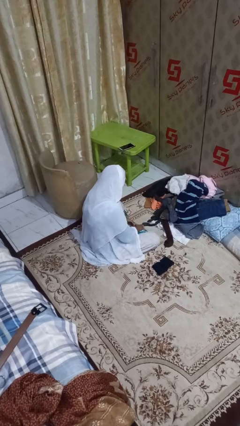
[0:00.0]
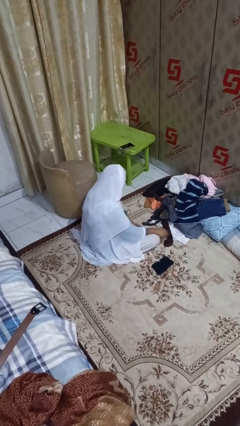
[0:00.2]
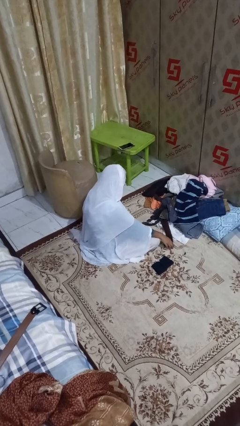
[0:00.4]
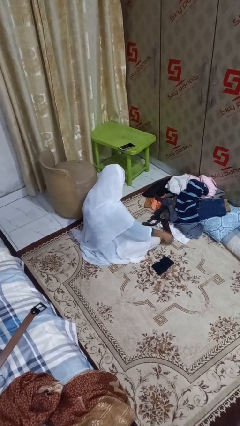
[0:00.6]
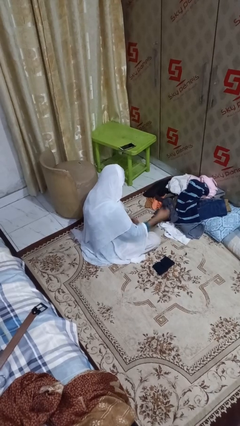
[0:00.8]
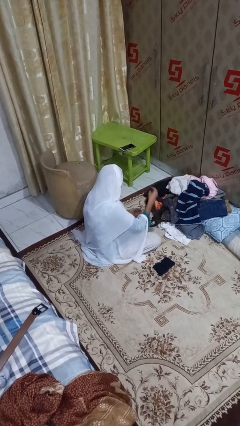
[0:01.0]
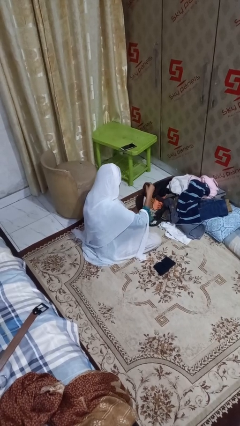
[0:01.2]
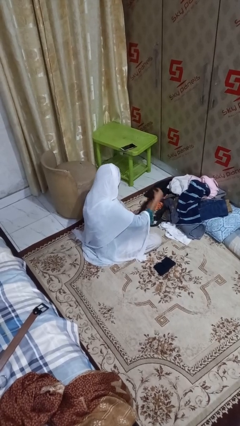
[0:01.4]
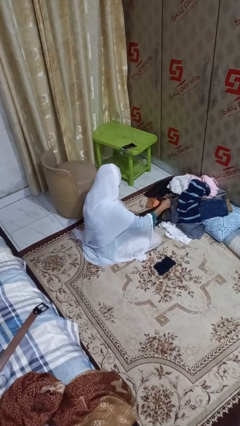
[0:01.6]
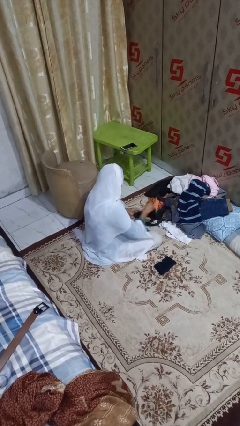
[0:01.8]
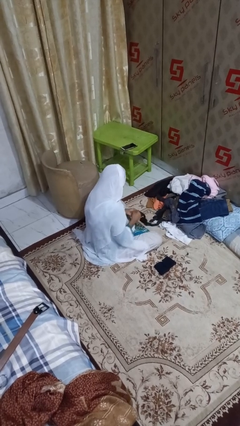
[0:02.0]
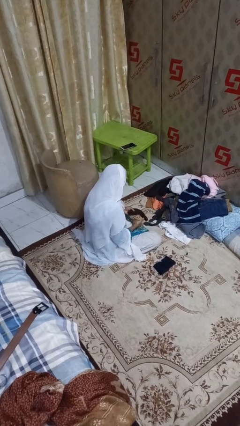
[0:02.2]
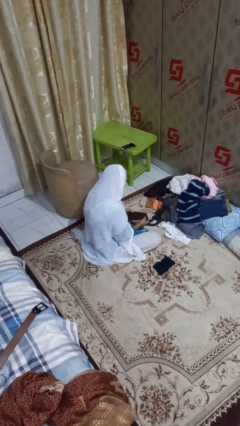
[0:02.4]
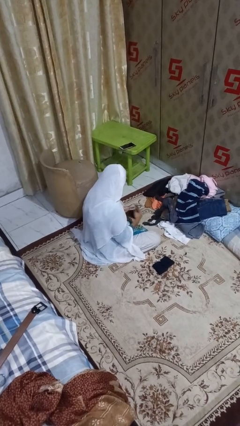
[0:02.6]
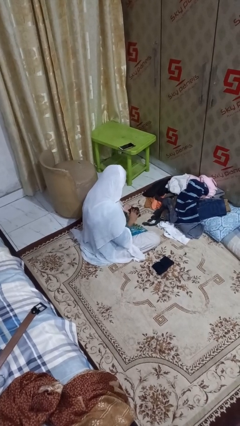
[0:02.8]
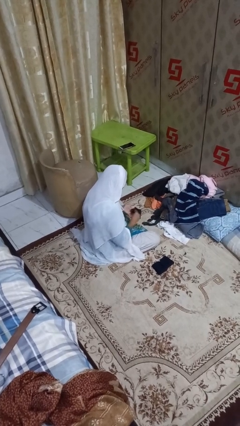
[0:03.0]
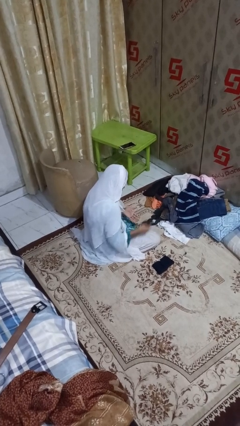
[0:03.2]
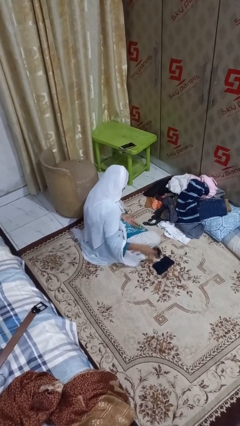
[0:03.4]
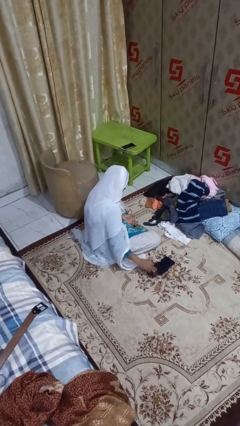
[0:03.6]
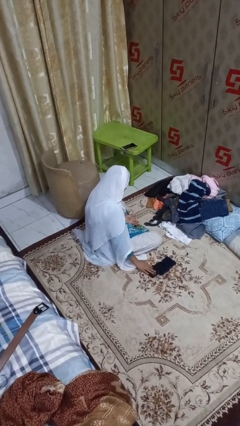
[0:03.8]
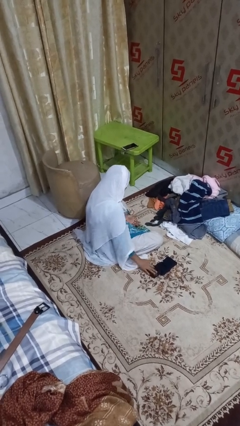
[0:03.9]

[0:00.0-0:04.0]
person folds socks

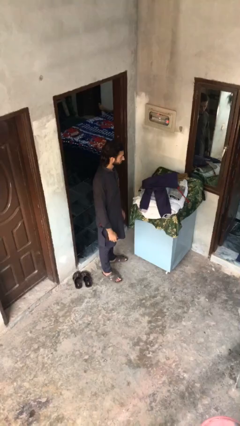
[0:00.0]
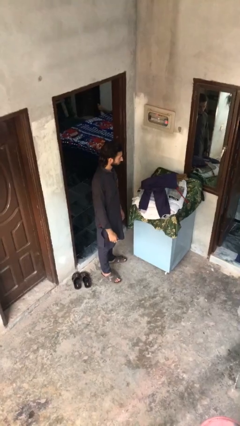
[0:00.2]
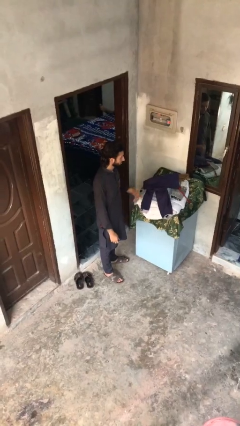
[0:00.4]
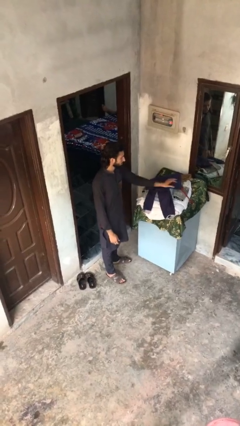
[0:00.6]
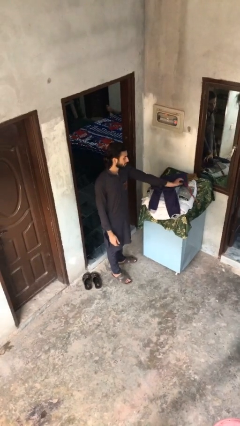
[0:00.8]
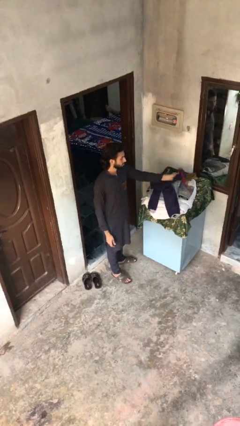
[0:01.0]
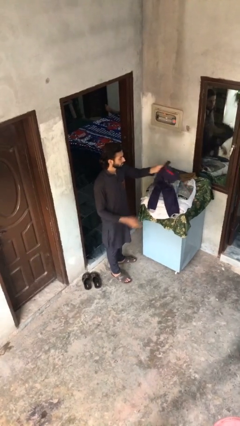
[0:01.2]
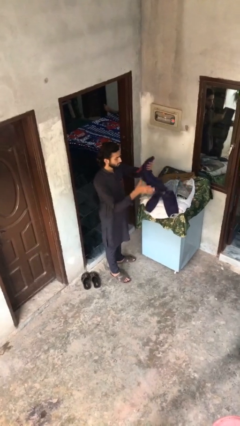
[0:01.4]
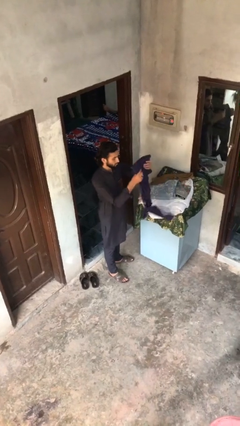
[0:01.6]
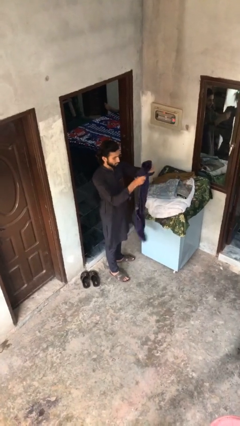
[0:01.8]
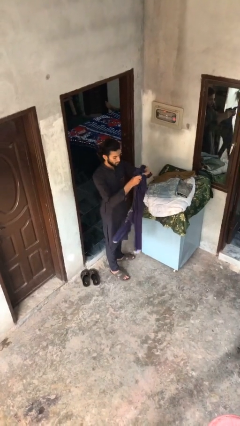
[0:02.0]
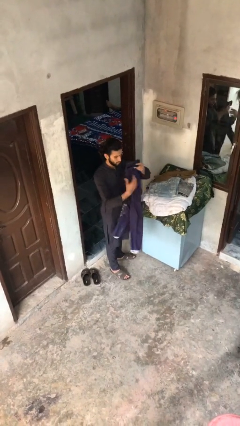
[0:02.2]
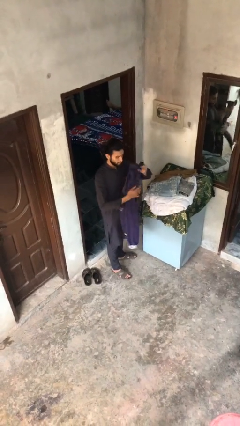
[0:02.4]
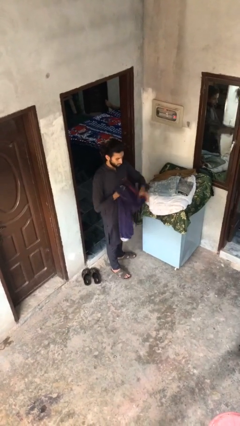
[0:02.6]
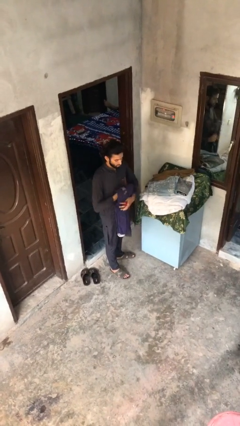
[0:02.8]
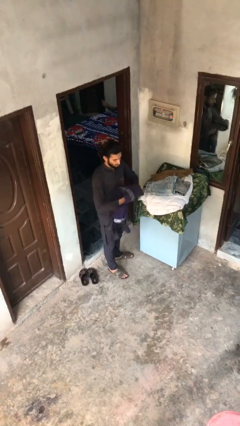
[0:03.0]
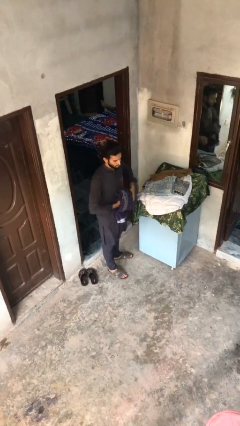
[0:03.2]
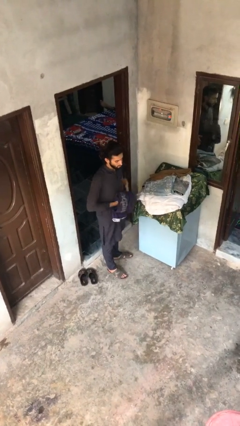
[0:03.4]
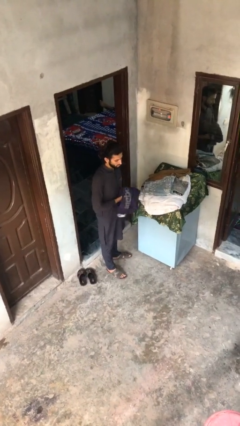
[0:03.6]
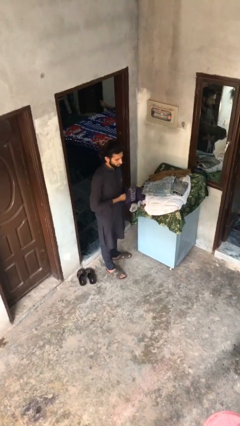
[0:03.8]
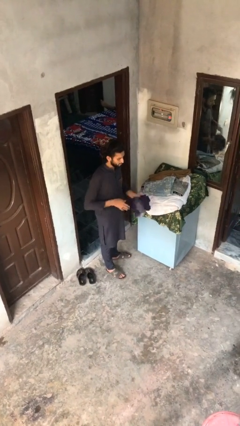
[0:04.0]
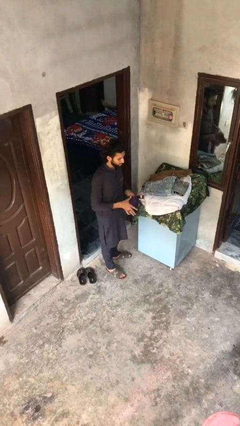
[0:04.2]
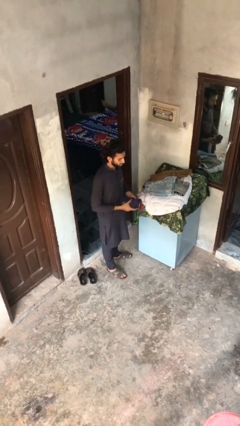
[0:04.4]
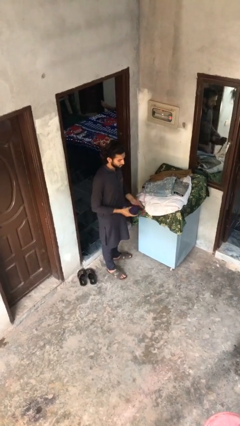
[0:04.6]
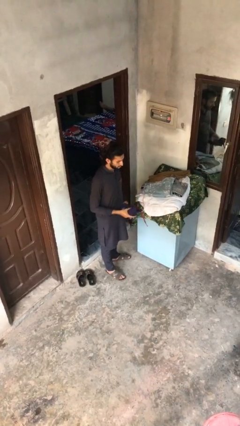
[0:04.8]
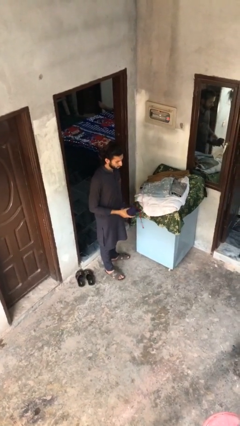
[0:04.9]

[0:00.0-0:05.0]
person folds pants

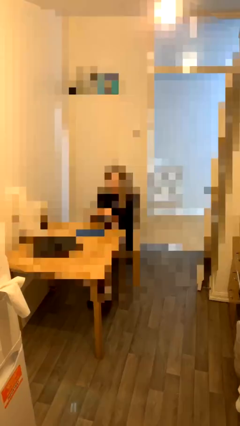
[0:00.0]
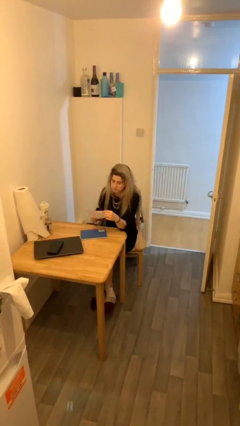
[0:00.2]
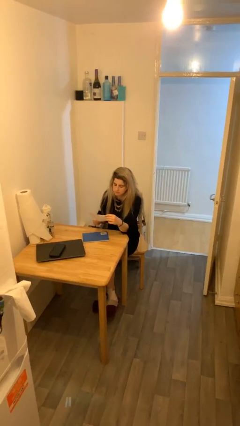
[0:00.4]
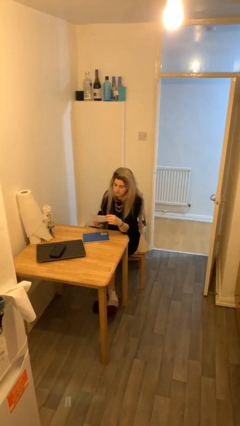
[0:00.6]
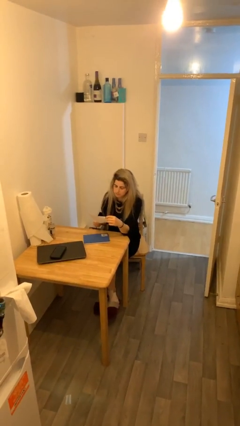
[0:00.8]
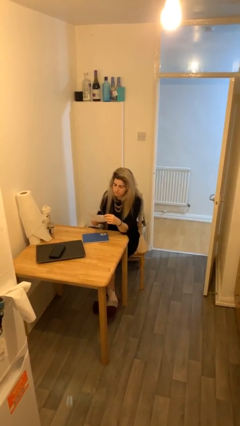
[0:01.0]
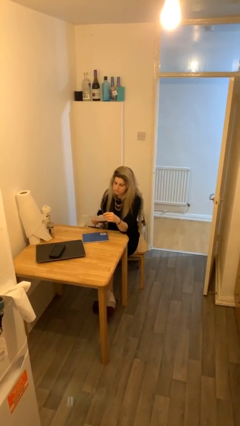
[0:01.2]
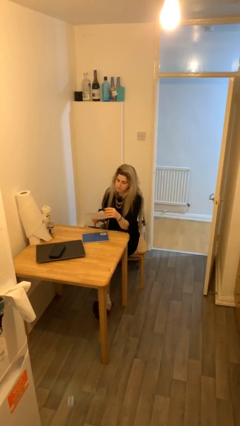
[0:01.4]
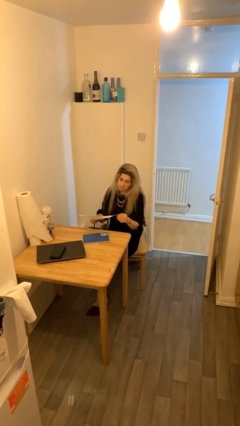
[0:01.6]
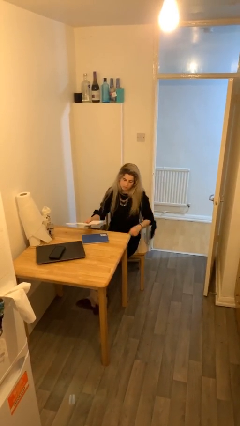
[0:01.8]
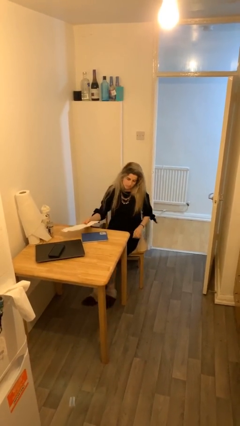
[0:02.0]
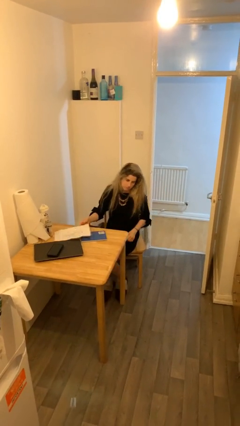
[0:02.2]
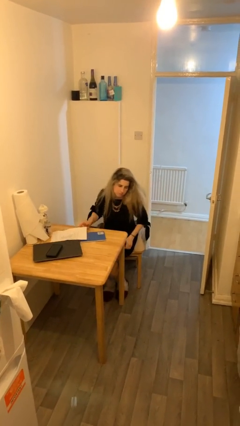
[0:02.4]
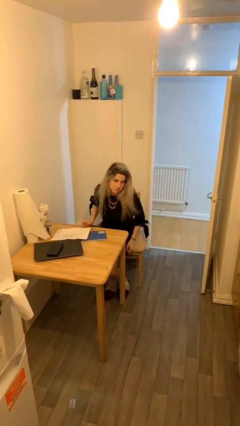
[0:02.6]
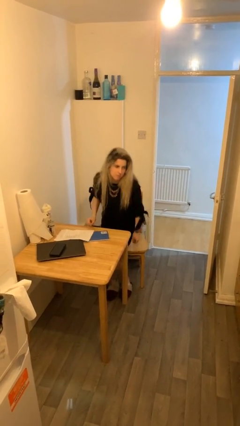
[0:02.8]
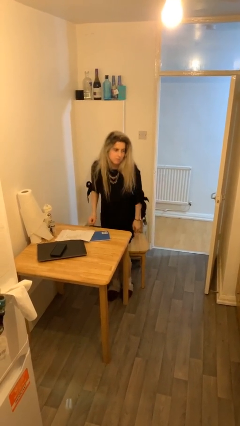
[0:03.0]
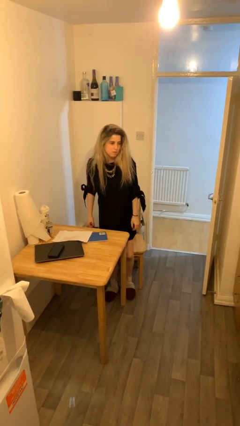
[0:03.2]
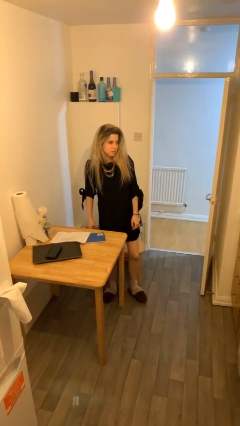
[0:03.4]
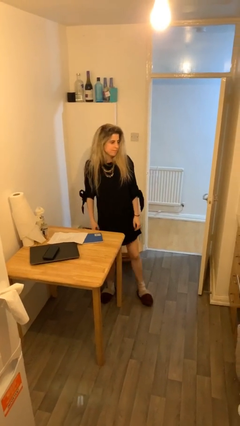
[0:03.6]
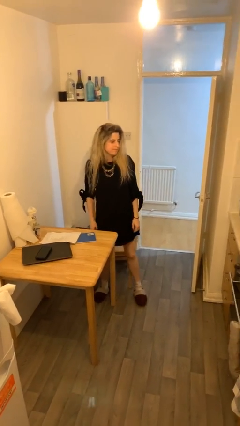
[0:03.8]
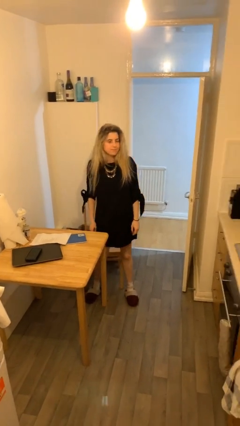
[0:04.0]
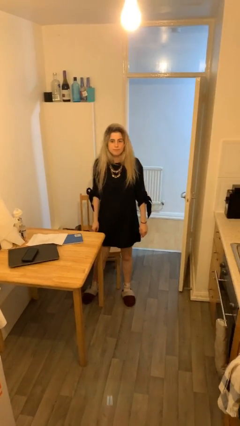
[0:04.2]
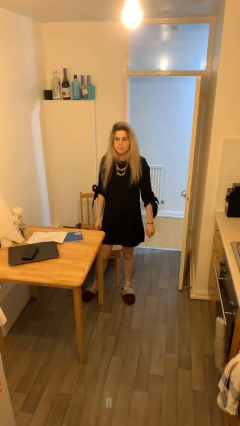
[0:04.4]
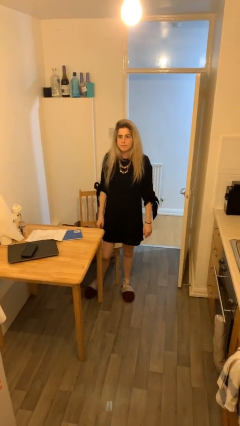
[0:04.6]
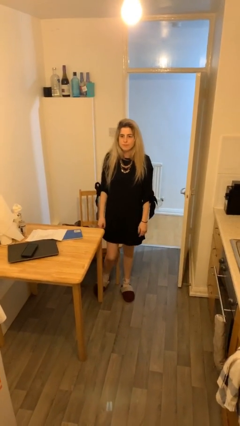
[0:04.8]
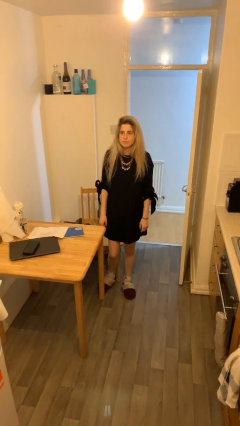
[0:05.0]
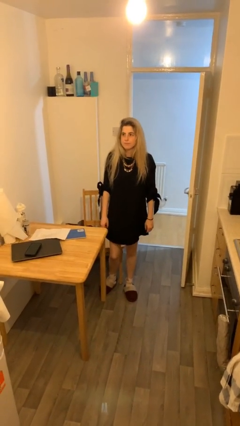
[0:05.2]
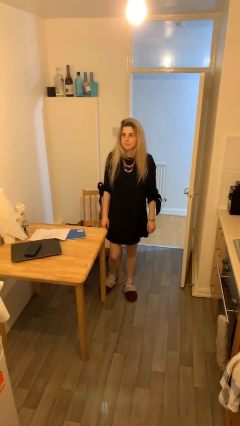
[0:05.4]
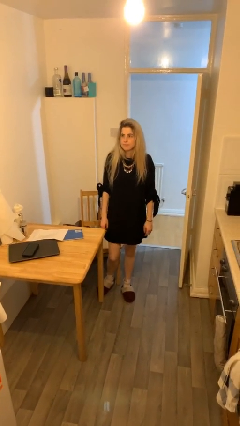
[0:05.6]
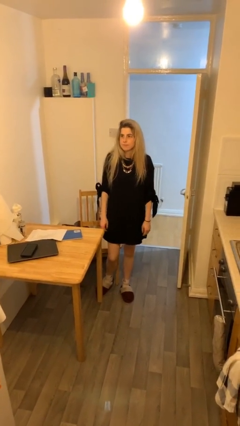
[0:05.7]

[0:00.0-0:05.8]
person stands up

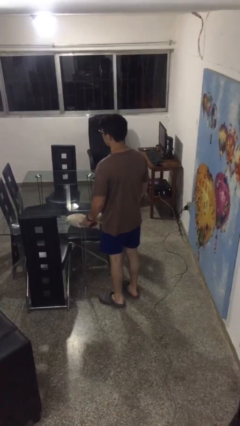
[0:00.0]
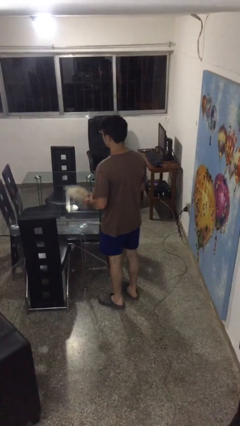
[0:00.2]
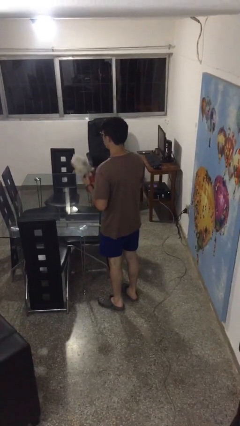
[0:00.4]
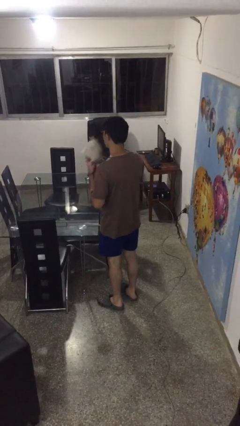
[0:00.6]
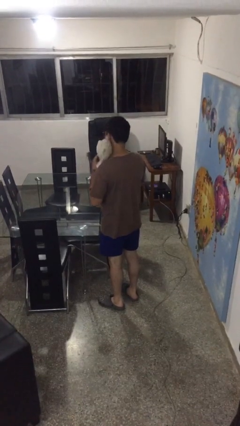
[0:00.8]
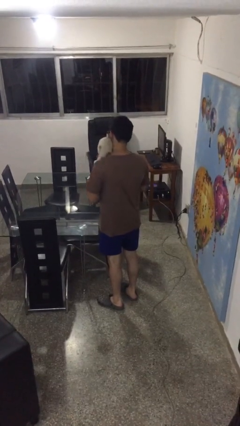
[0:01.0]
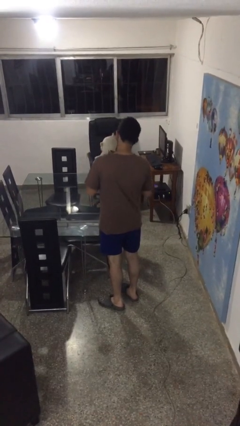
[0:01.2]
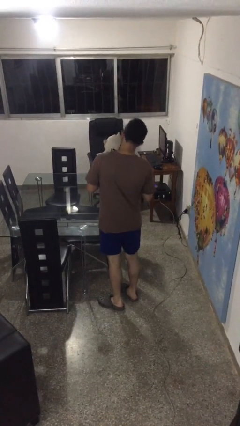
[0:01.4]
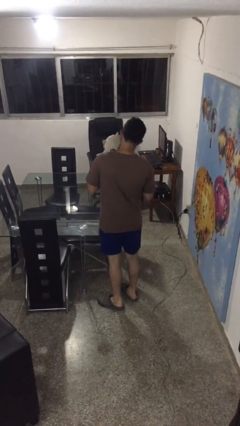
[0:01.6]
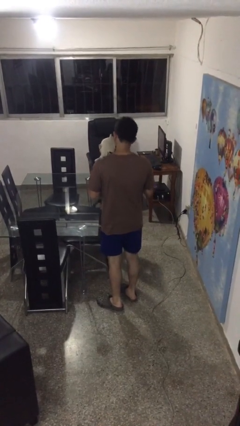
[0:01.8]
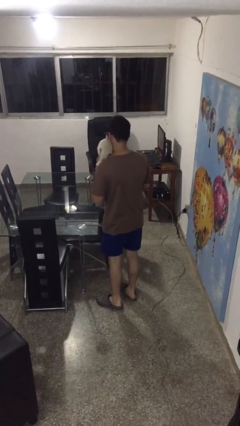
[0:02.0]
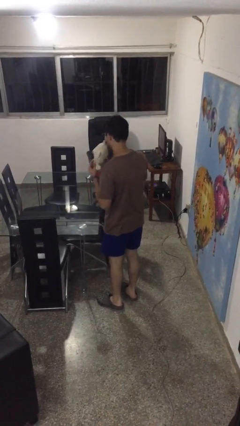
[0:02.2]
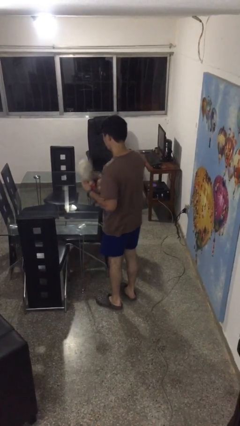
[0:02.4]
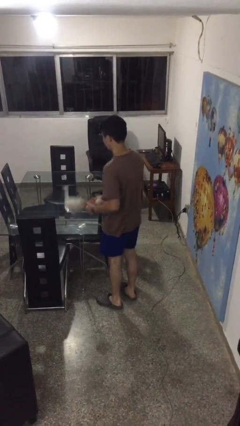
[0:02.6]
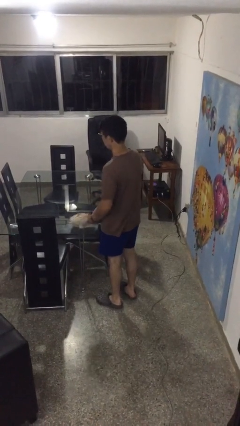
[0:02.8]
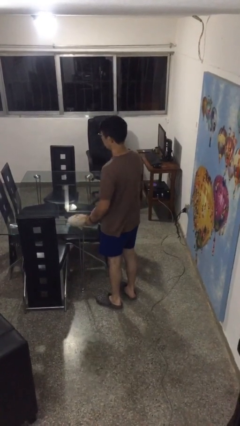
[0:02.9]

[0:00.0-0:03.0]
person hugs stuffed animal
